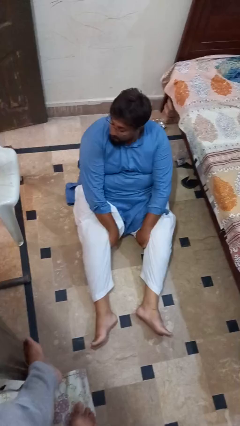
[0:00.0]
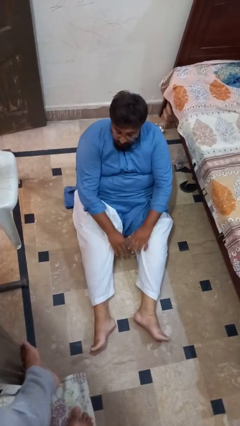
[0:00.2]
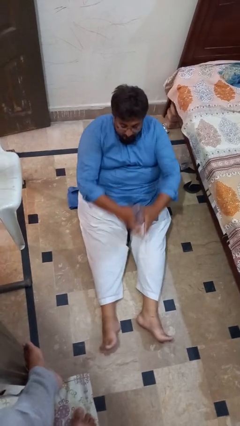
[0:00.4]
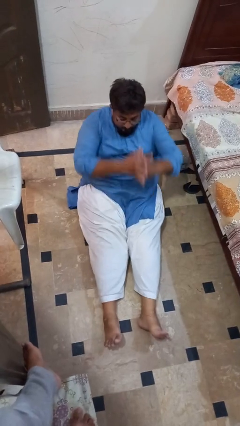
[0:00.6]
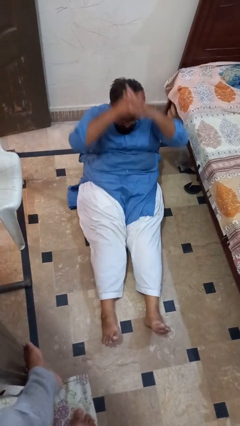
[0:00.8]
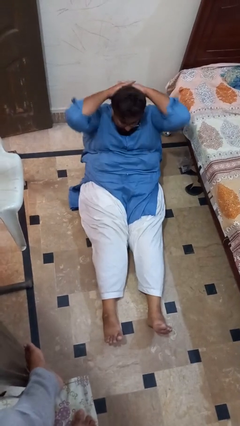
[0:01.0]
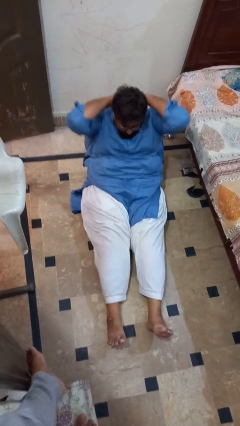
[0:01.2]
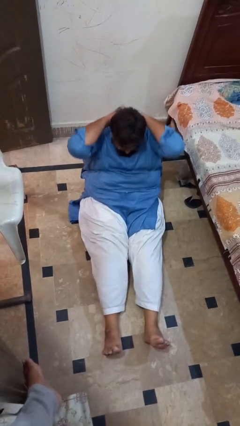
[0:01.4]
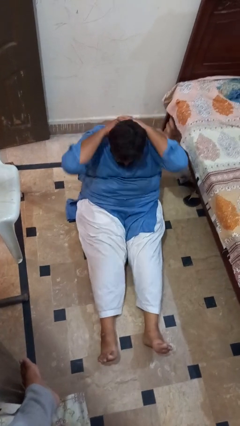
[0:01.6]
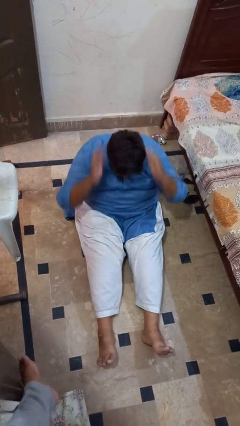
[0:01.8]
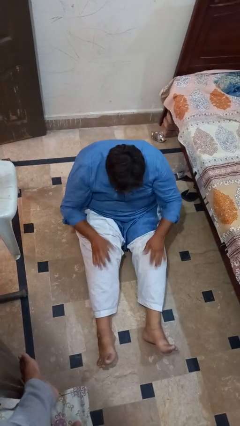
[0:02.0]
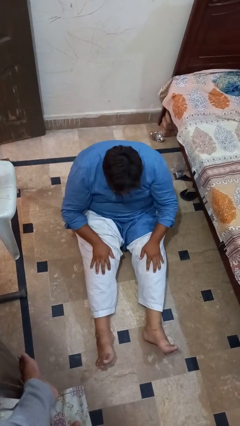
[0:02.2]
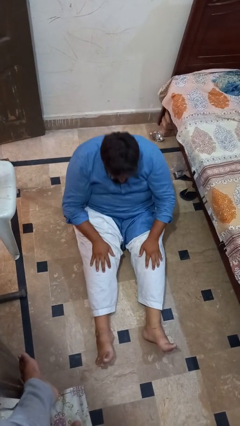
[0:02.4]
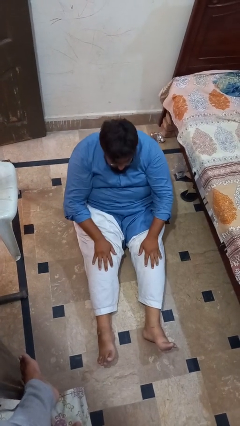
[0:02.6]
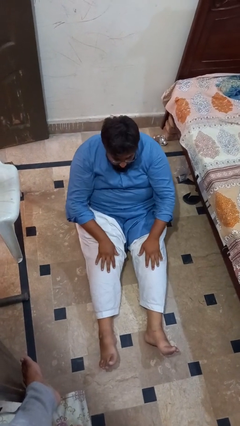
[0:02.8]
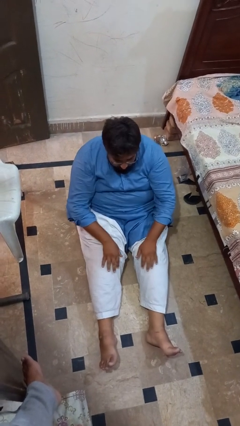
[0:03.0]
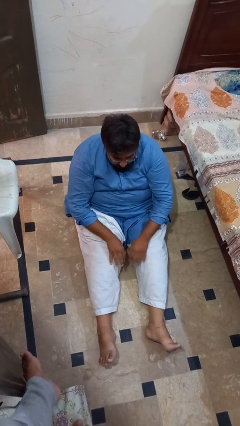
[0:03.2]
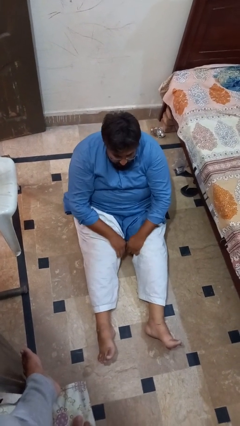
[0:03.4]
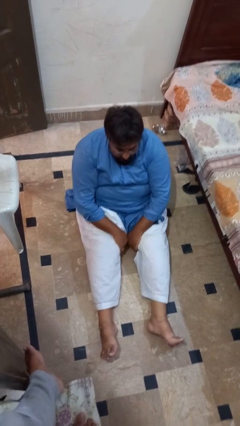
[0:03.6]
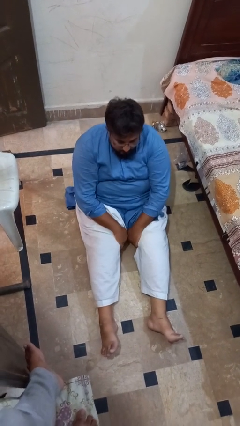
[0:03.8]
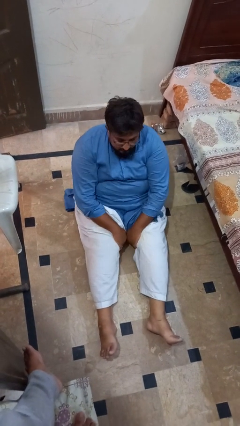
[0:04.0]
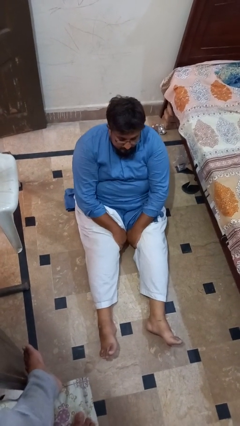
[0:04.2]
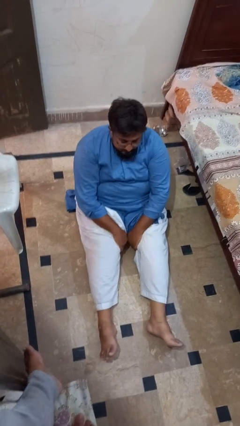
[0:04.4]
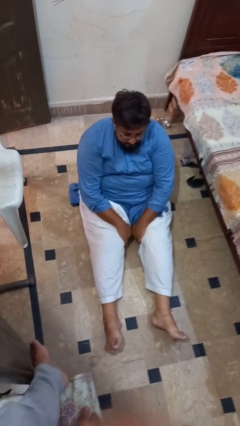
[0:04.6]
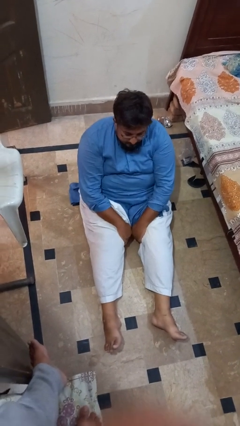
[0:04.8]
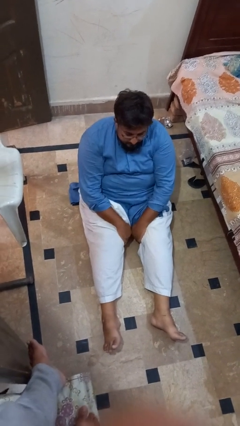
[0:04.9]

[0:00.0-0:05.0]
person exercises with situp

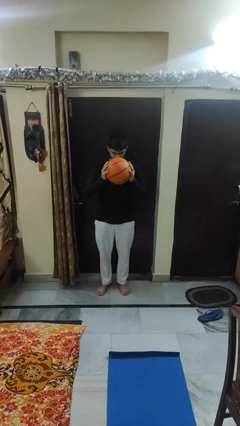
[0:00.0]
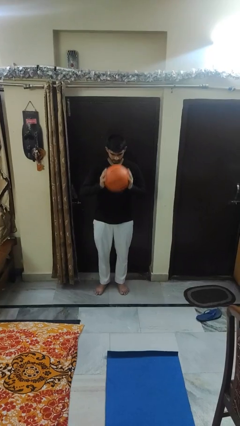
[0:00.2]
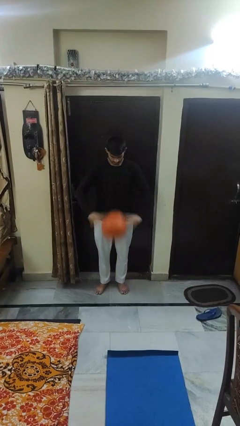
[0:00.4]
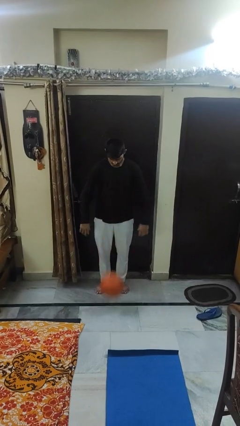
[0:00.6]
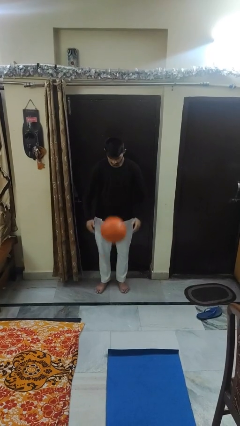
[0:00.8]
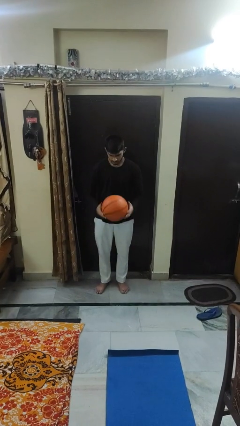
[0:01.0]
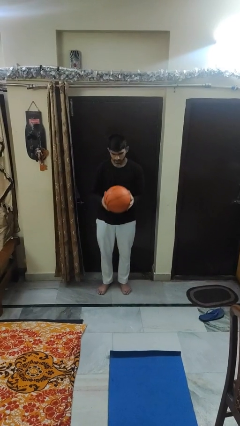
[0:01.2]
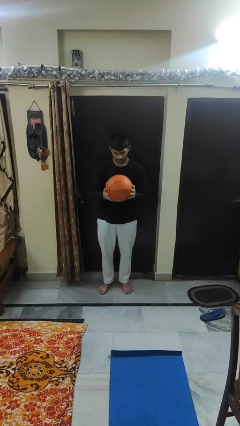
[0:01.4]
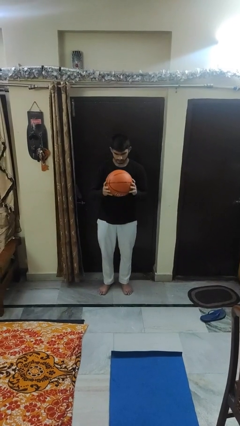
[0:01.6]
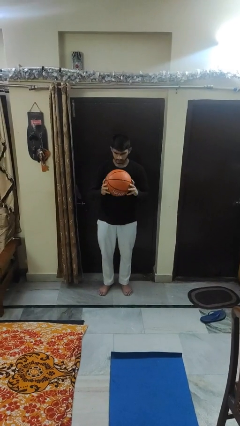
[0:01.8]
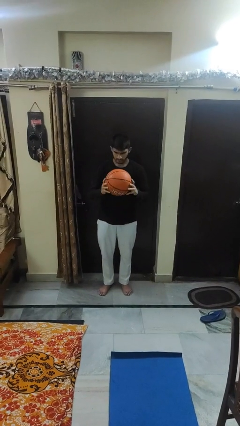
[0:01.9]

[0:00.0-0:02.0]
person bounces ball on floor

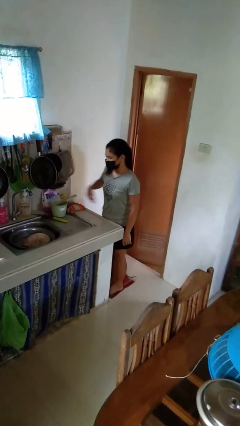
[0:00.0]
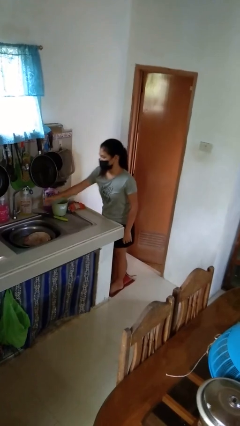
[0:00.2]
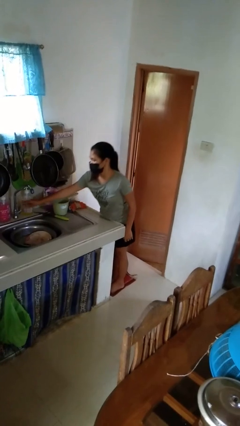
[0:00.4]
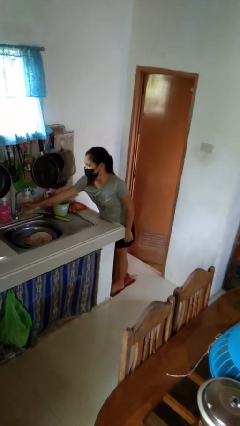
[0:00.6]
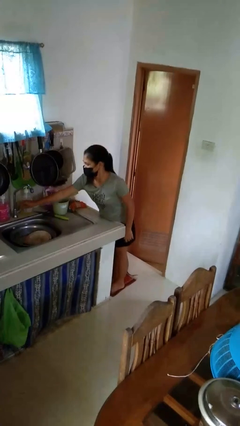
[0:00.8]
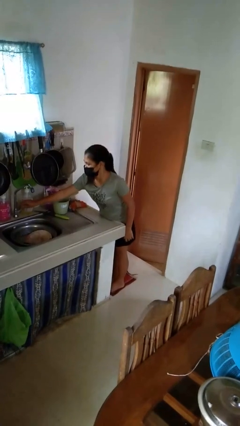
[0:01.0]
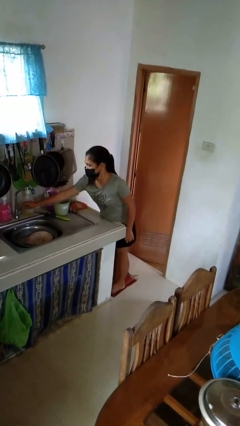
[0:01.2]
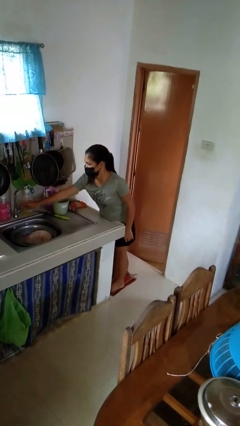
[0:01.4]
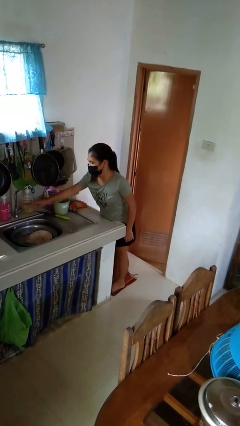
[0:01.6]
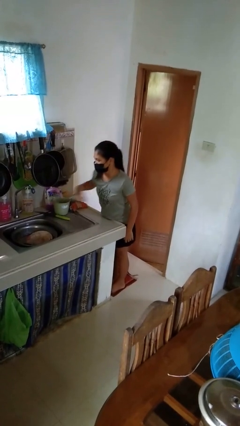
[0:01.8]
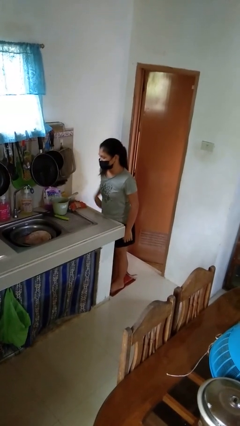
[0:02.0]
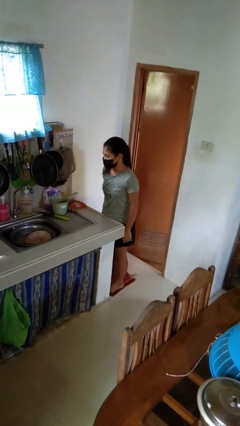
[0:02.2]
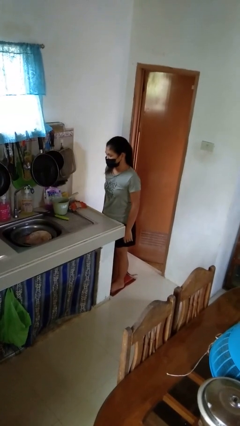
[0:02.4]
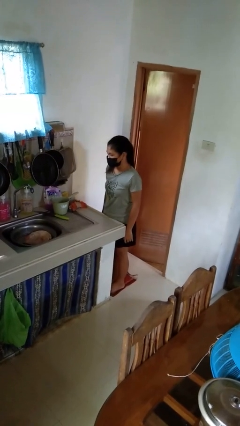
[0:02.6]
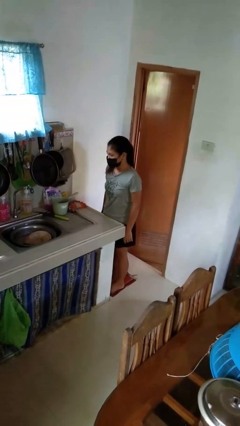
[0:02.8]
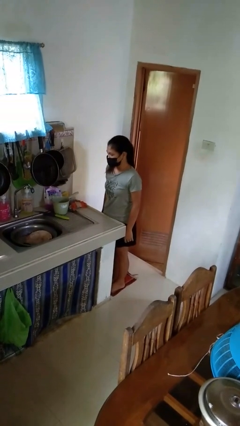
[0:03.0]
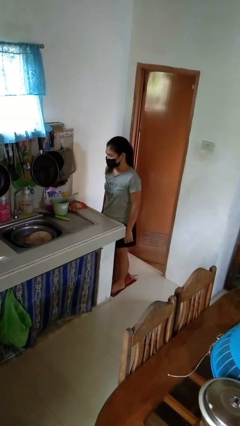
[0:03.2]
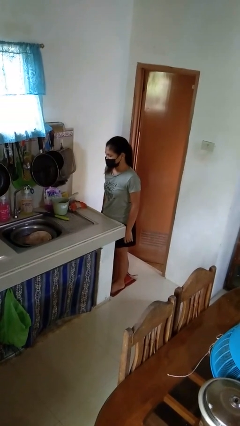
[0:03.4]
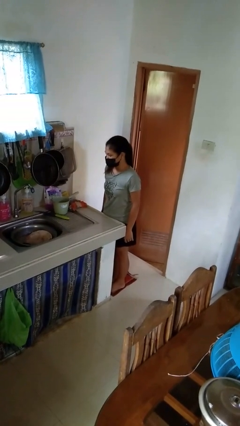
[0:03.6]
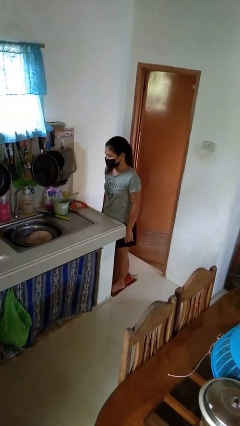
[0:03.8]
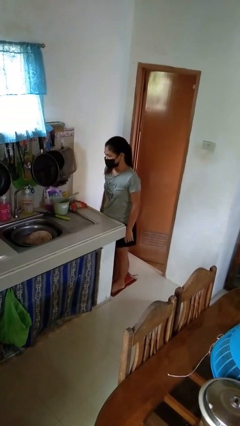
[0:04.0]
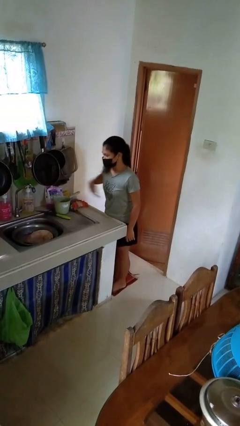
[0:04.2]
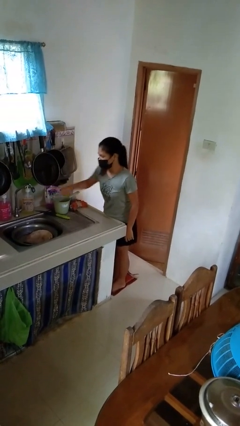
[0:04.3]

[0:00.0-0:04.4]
person turns on faucet

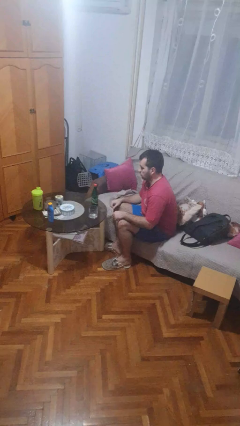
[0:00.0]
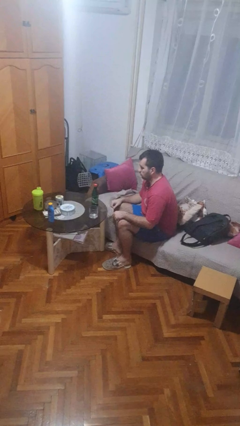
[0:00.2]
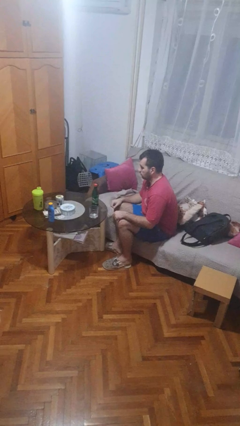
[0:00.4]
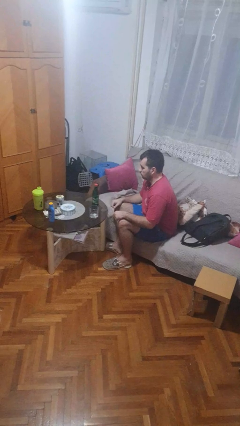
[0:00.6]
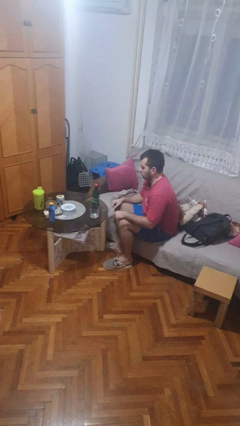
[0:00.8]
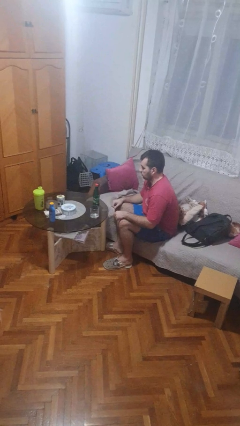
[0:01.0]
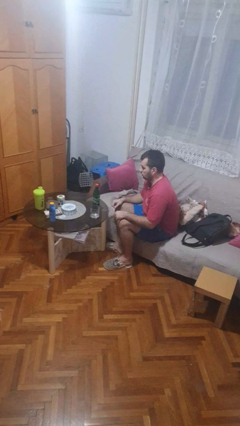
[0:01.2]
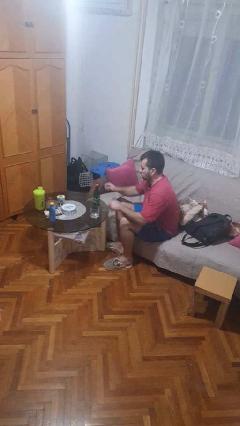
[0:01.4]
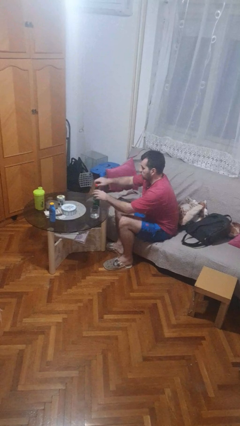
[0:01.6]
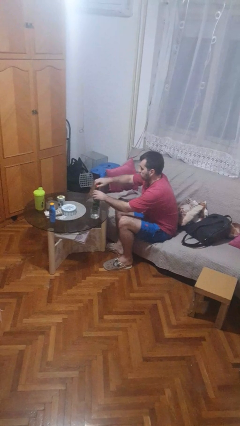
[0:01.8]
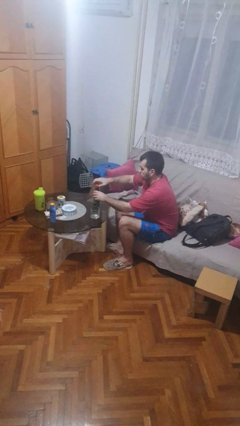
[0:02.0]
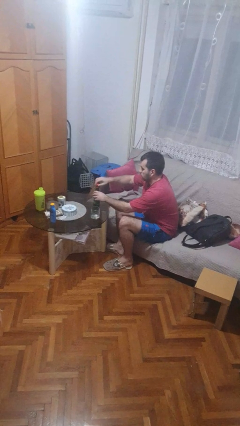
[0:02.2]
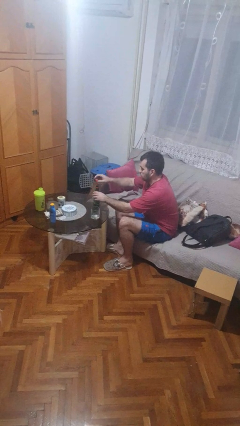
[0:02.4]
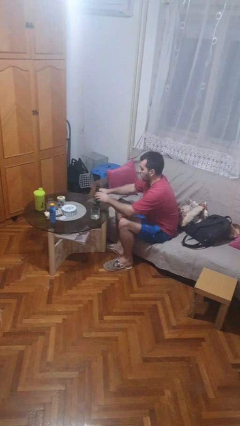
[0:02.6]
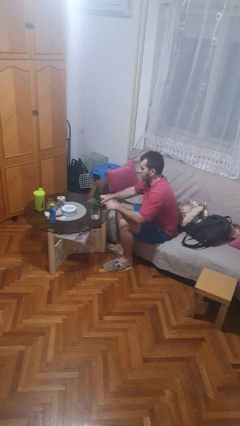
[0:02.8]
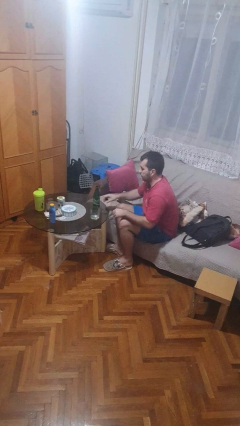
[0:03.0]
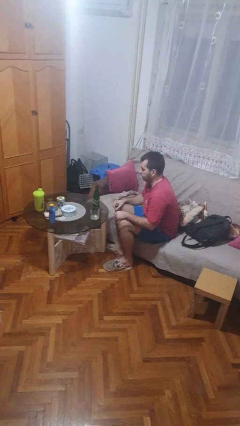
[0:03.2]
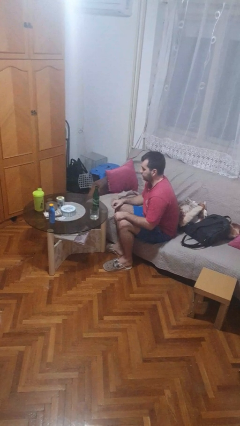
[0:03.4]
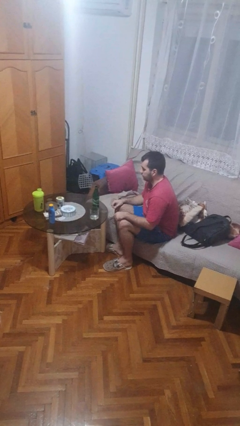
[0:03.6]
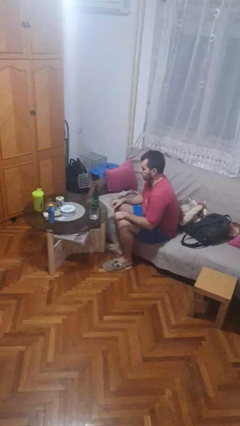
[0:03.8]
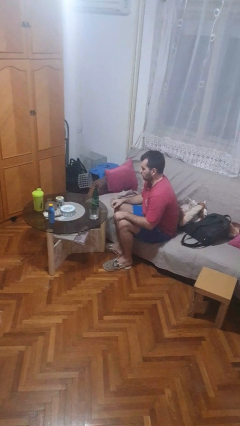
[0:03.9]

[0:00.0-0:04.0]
person unscrews lid from bottle

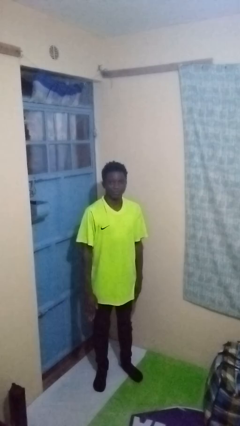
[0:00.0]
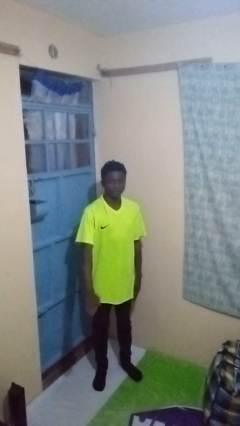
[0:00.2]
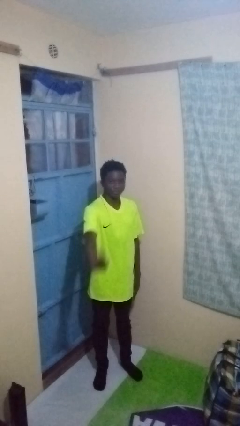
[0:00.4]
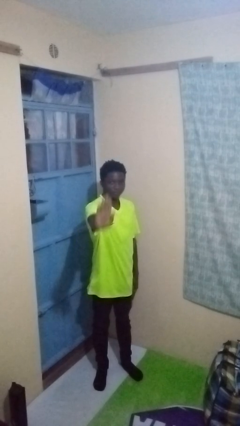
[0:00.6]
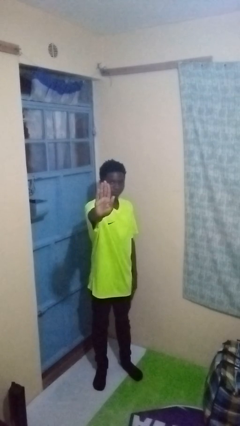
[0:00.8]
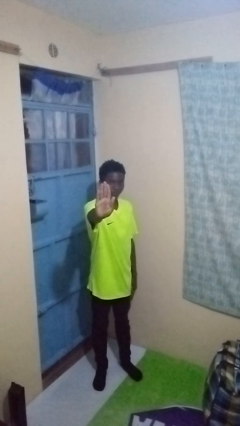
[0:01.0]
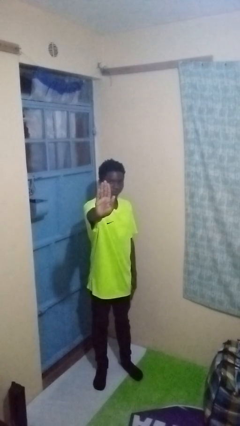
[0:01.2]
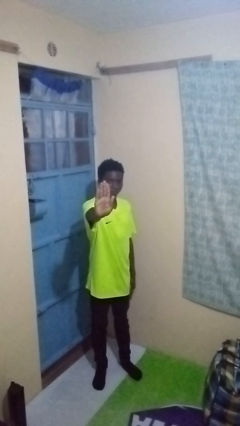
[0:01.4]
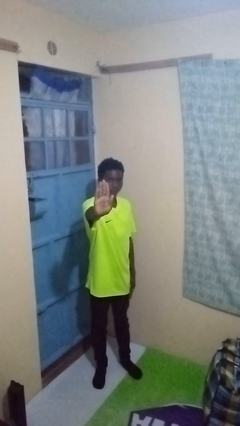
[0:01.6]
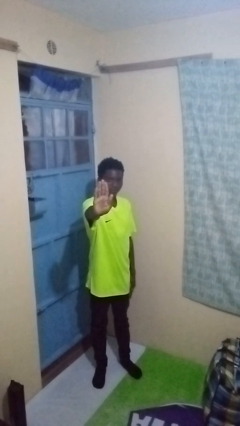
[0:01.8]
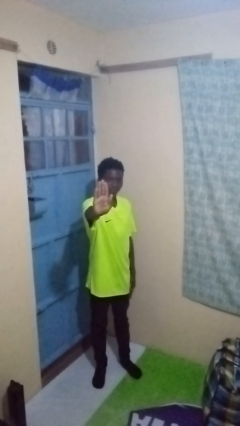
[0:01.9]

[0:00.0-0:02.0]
person gestures stop

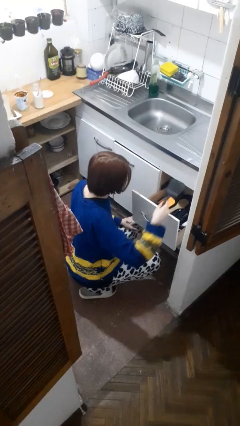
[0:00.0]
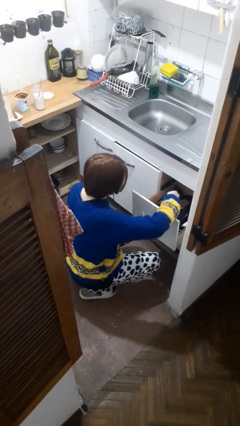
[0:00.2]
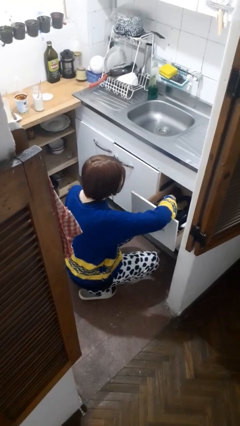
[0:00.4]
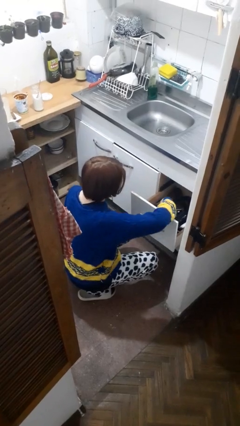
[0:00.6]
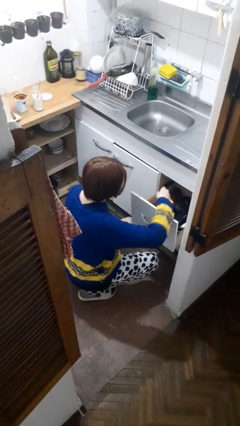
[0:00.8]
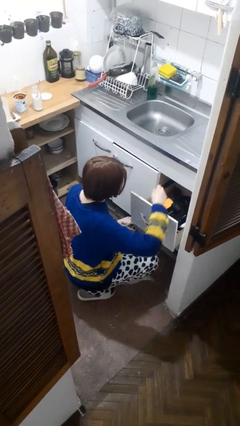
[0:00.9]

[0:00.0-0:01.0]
person puts object into kitchen drawer
